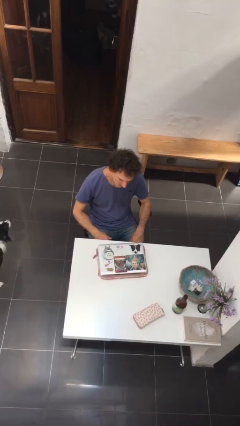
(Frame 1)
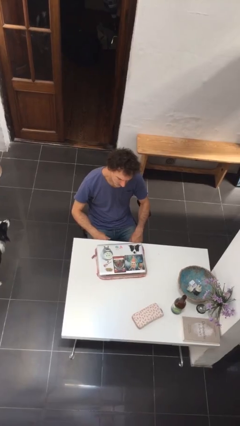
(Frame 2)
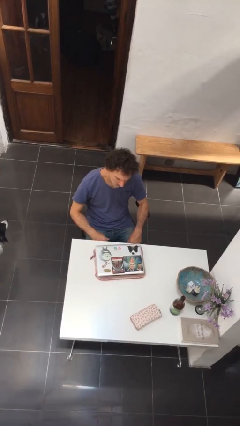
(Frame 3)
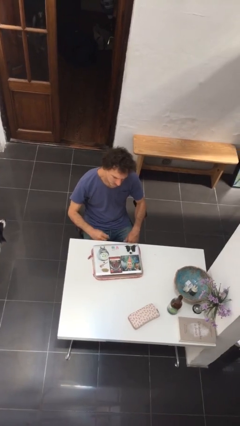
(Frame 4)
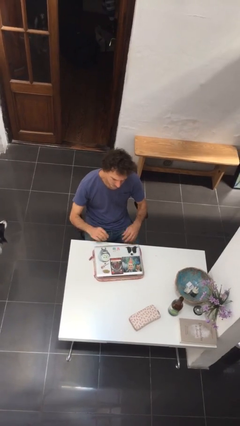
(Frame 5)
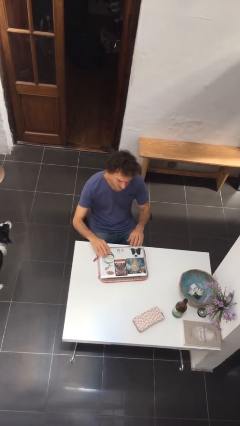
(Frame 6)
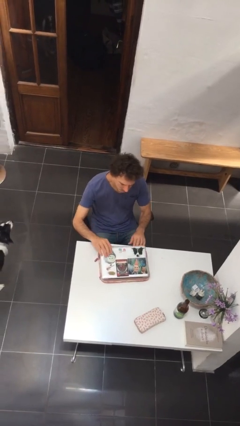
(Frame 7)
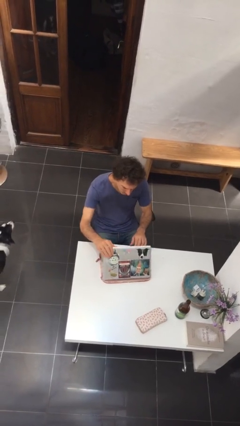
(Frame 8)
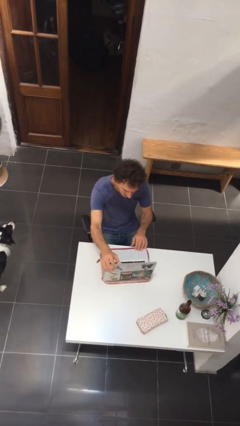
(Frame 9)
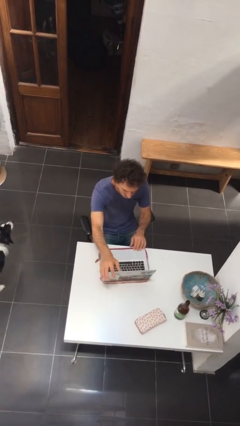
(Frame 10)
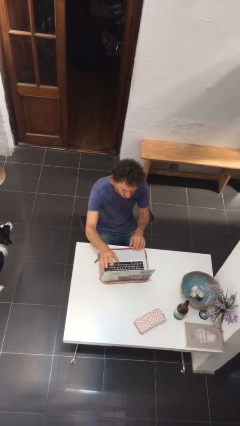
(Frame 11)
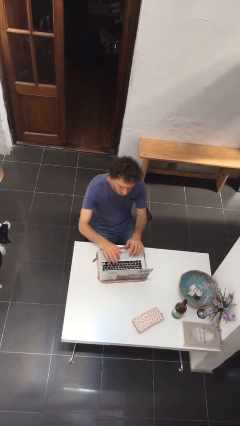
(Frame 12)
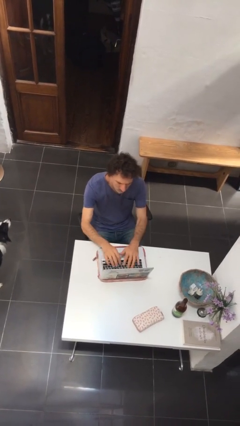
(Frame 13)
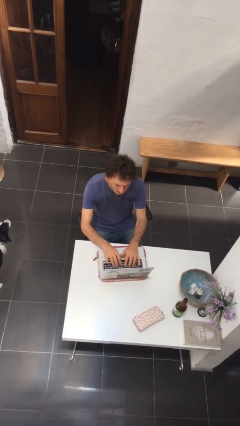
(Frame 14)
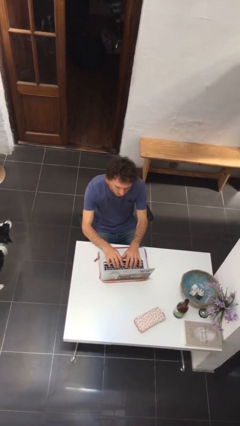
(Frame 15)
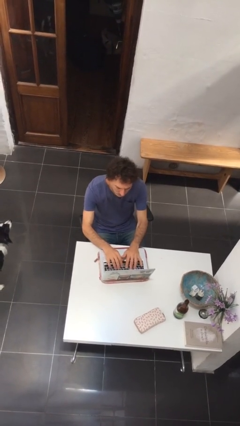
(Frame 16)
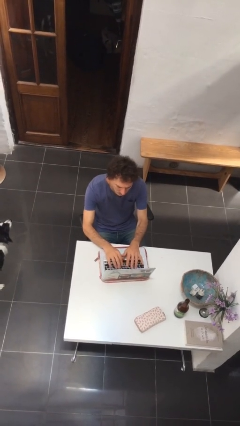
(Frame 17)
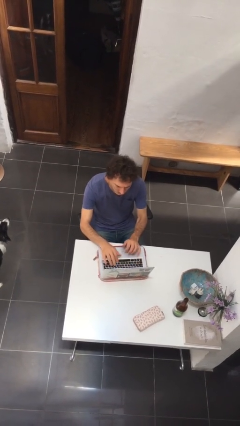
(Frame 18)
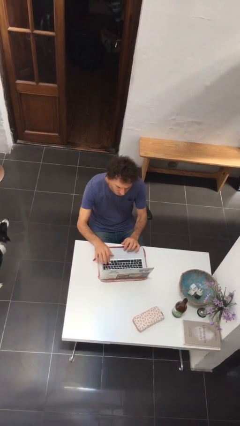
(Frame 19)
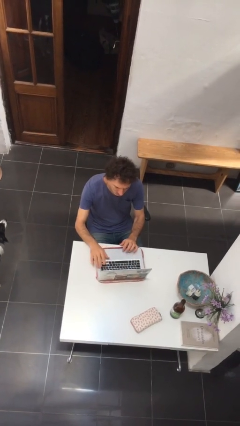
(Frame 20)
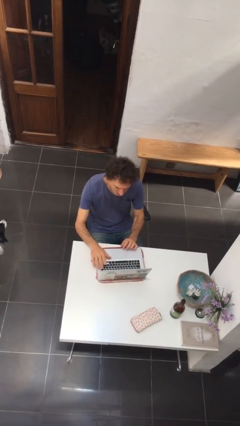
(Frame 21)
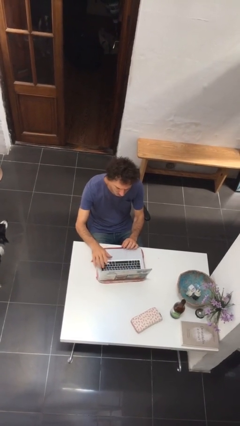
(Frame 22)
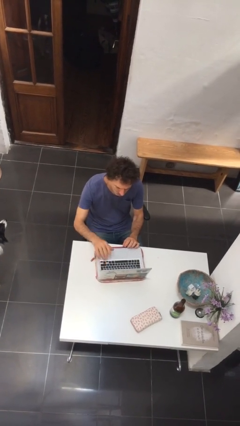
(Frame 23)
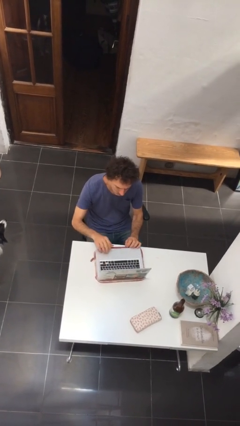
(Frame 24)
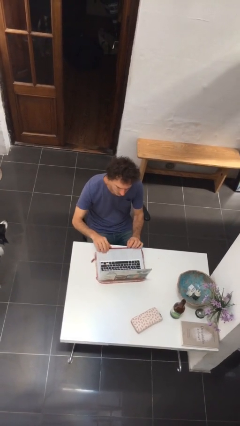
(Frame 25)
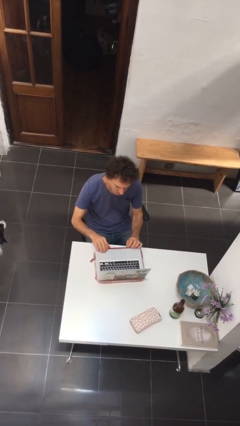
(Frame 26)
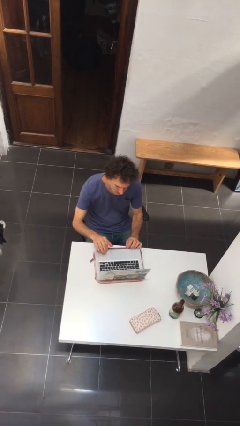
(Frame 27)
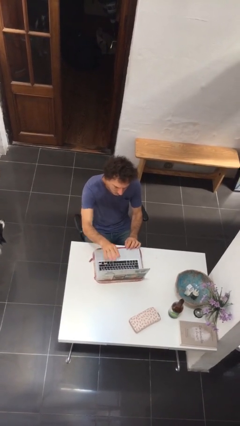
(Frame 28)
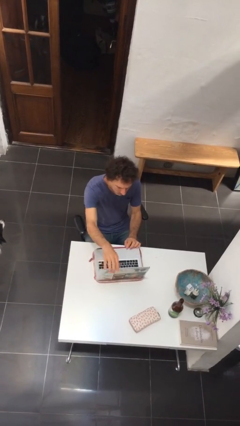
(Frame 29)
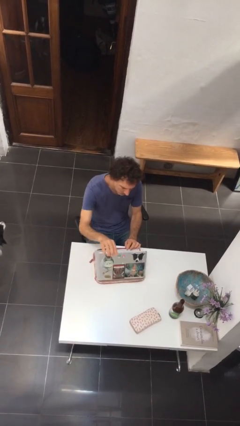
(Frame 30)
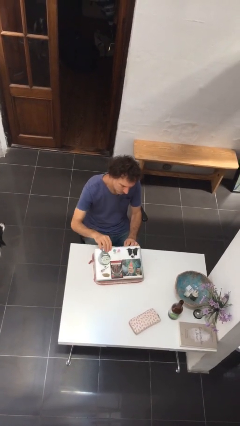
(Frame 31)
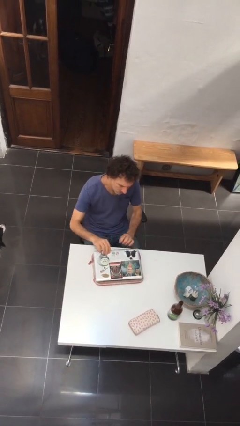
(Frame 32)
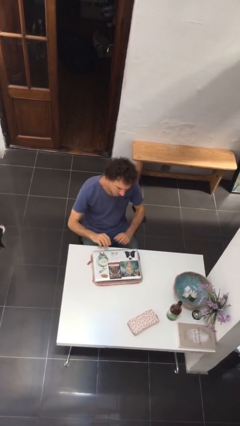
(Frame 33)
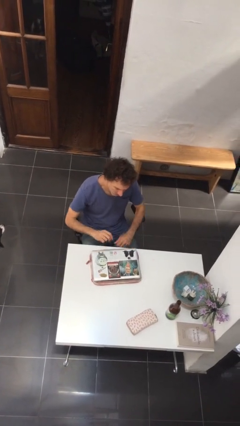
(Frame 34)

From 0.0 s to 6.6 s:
person interacts with laptop

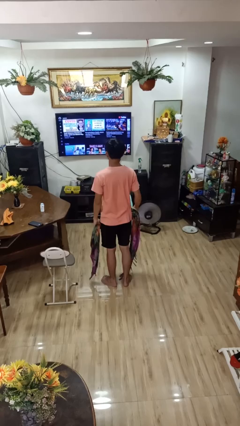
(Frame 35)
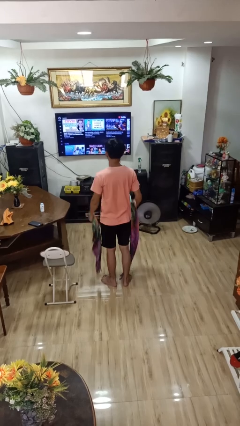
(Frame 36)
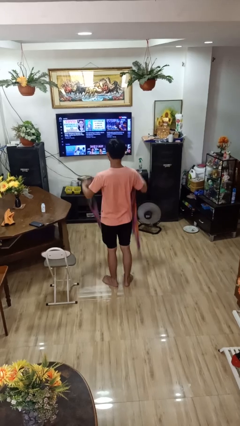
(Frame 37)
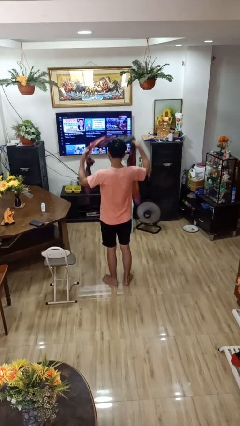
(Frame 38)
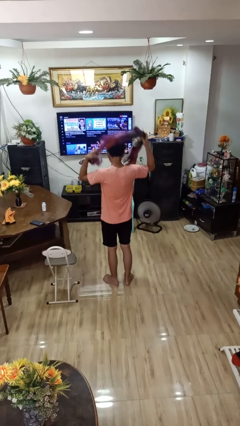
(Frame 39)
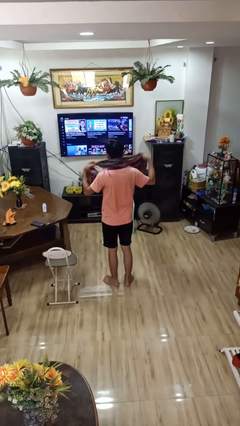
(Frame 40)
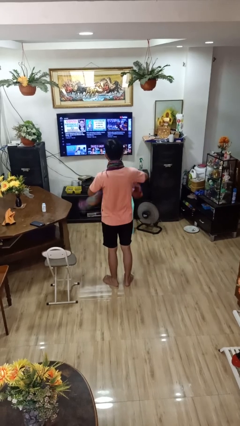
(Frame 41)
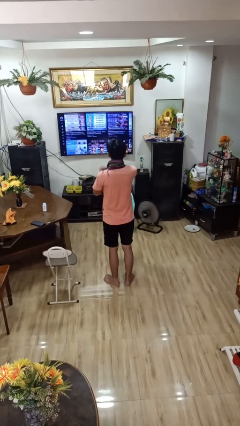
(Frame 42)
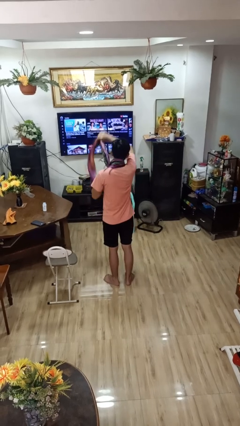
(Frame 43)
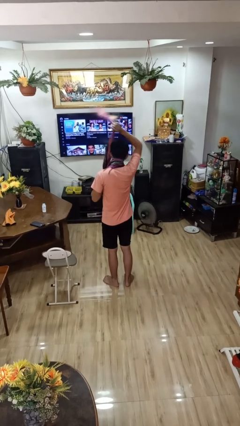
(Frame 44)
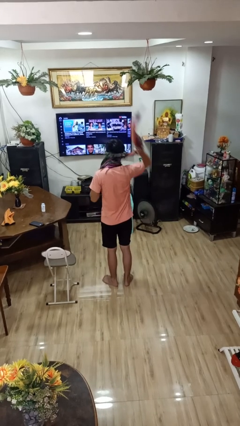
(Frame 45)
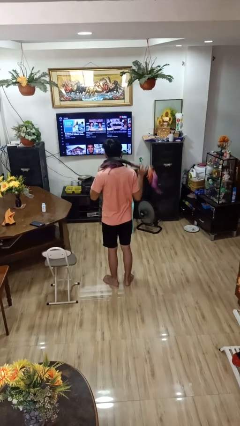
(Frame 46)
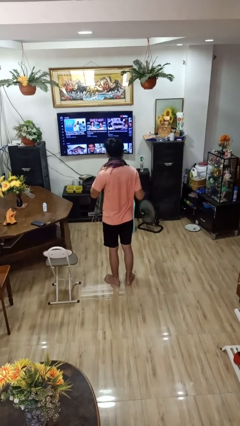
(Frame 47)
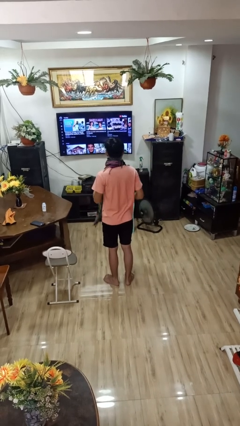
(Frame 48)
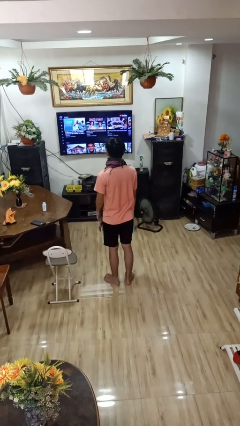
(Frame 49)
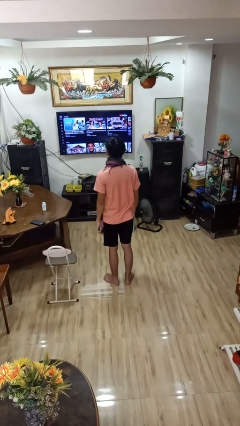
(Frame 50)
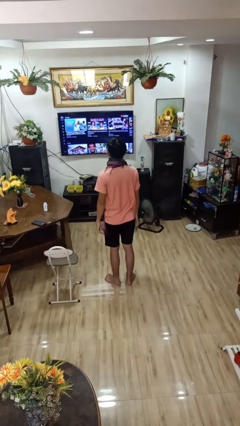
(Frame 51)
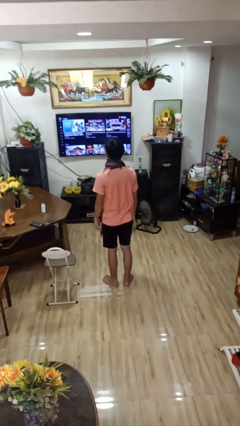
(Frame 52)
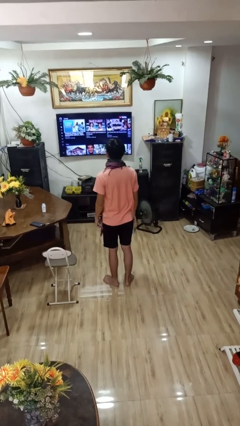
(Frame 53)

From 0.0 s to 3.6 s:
person puts on scarf

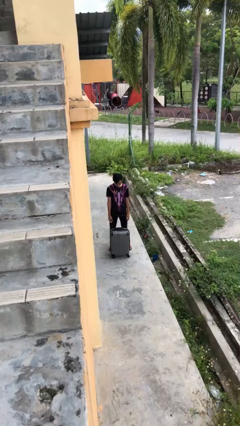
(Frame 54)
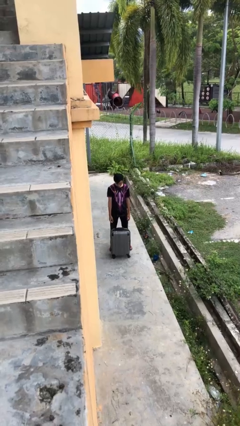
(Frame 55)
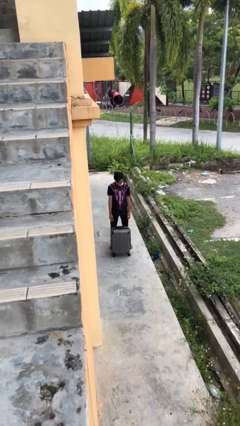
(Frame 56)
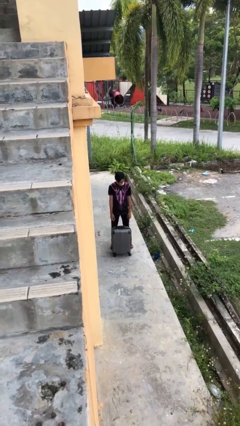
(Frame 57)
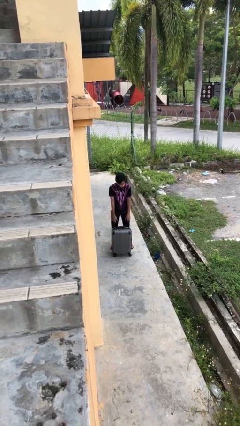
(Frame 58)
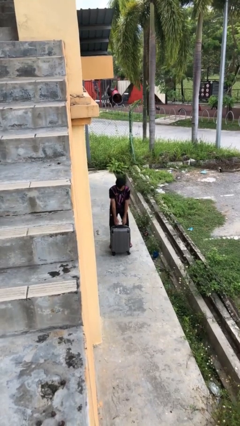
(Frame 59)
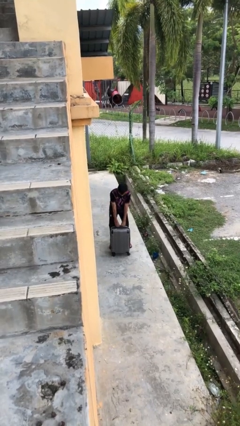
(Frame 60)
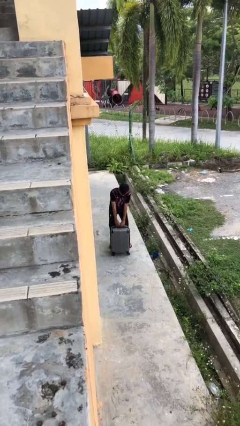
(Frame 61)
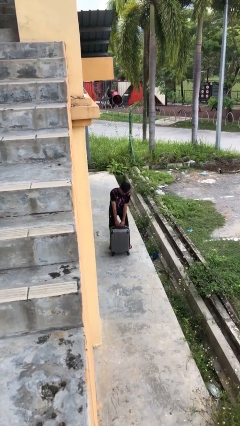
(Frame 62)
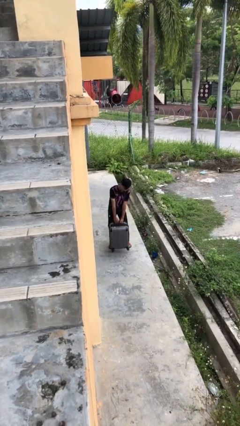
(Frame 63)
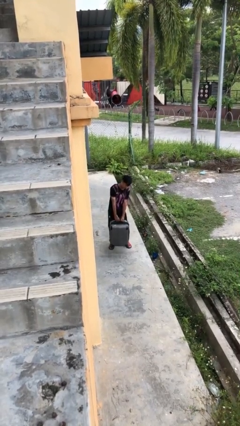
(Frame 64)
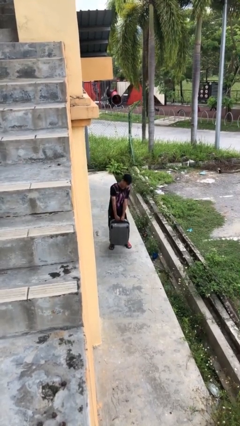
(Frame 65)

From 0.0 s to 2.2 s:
person picks up object from floor

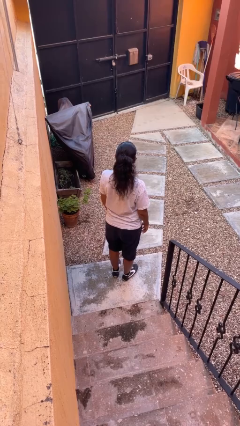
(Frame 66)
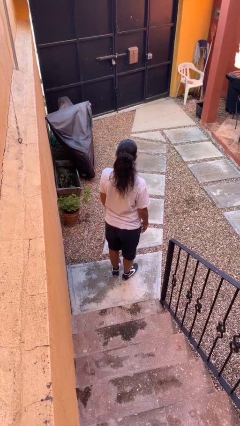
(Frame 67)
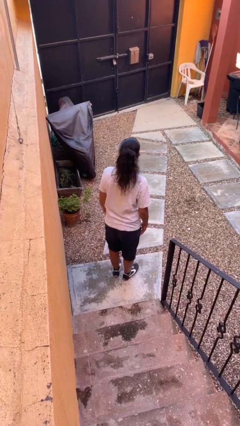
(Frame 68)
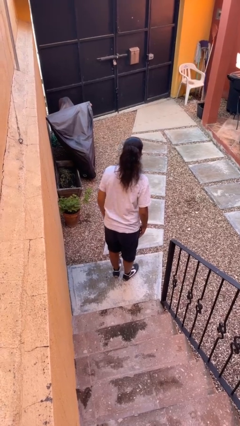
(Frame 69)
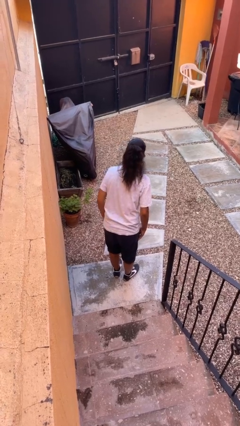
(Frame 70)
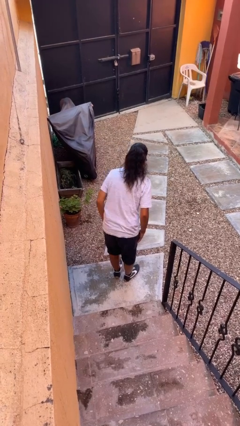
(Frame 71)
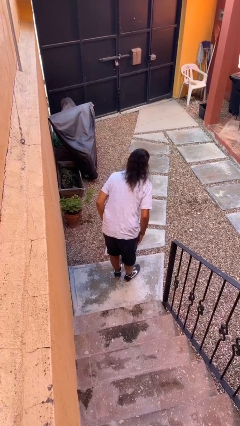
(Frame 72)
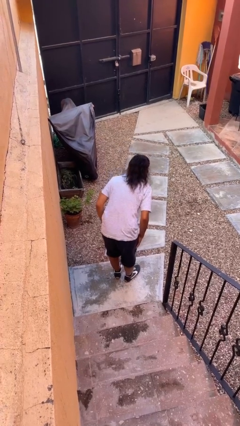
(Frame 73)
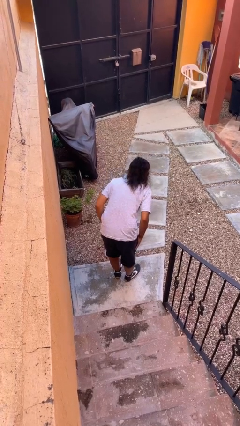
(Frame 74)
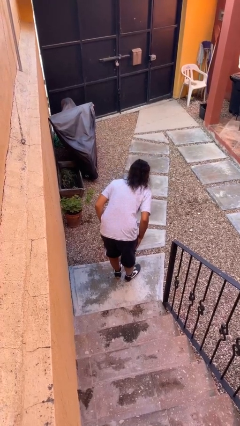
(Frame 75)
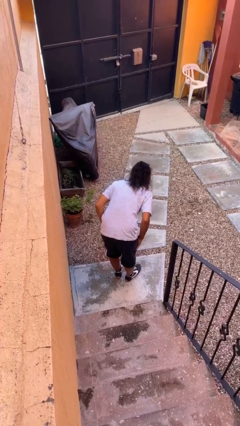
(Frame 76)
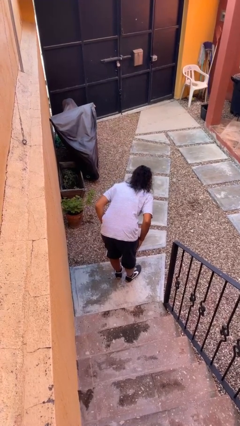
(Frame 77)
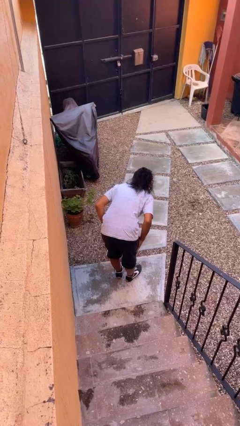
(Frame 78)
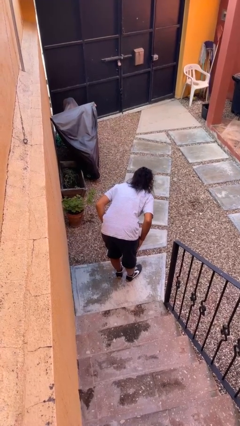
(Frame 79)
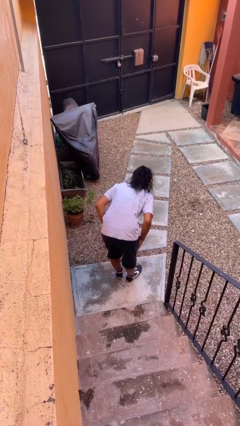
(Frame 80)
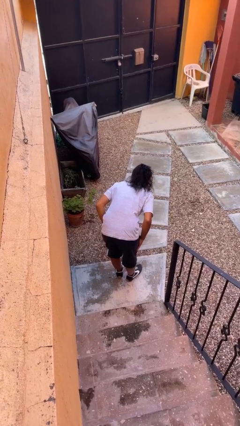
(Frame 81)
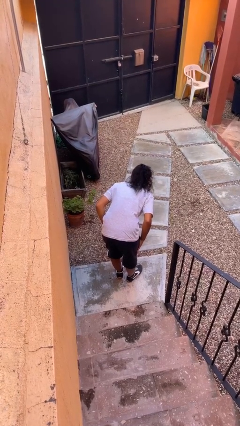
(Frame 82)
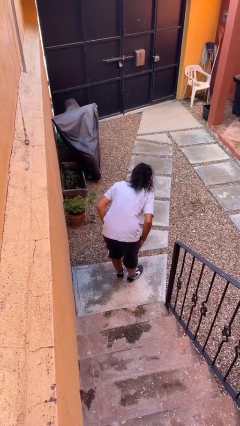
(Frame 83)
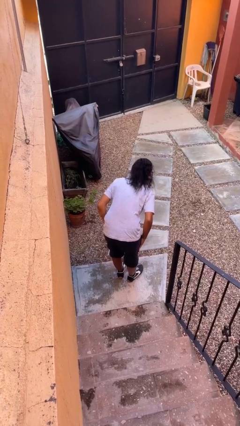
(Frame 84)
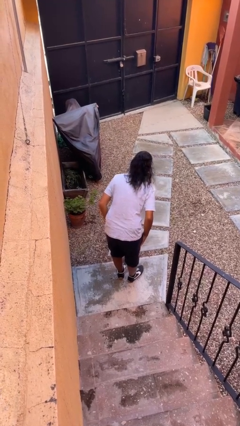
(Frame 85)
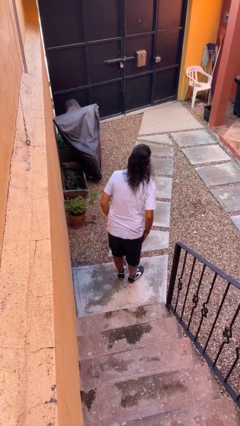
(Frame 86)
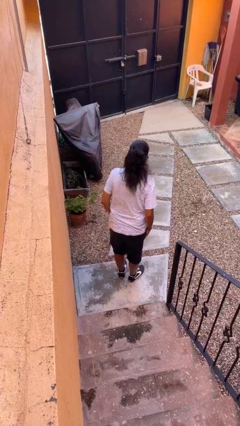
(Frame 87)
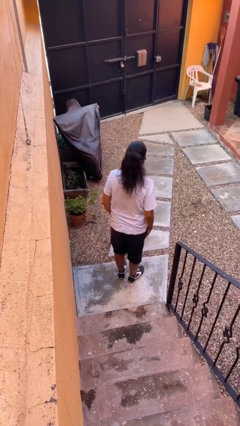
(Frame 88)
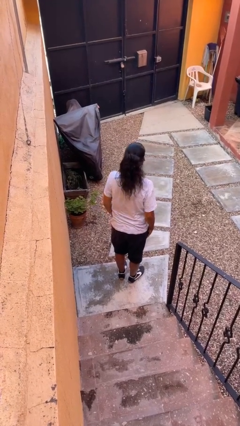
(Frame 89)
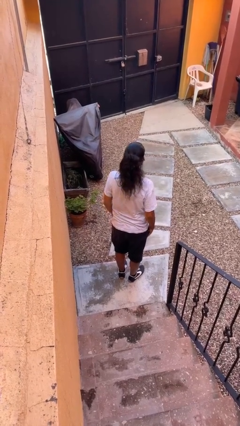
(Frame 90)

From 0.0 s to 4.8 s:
person bows

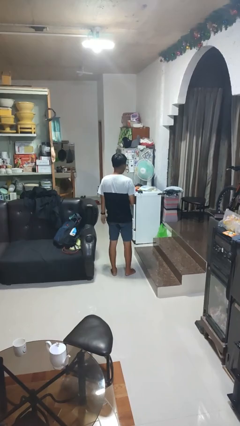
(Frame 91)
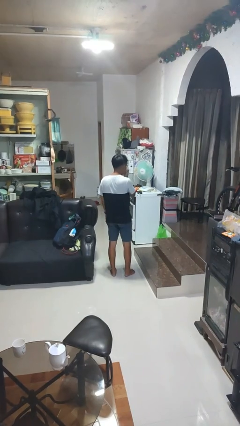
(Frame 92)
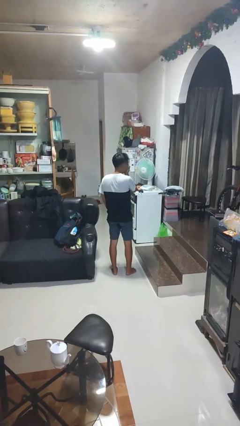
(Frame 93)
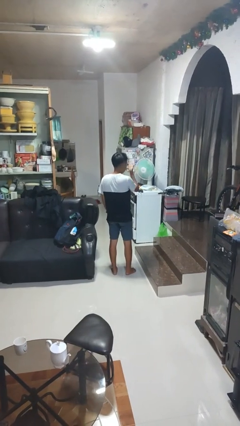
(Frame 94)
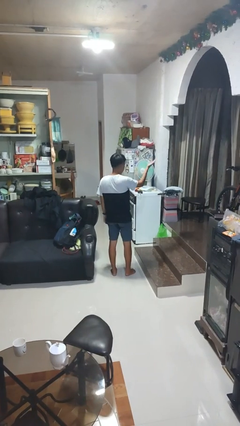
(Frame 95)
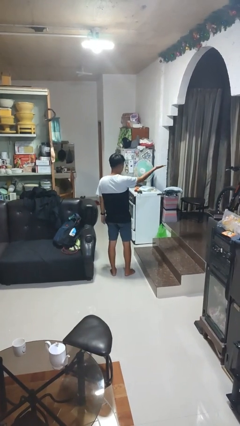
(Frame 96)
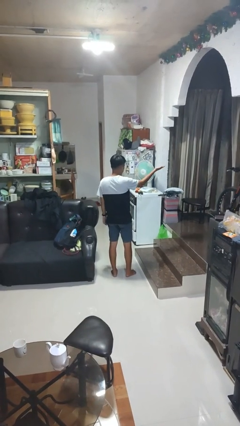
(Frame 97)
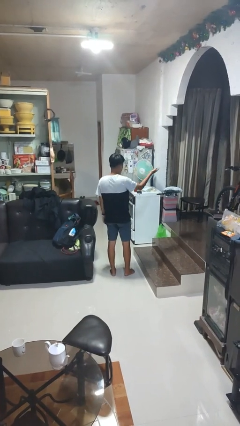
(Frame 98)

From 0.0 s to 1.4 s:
person gestures blow kiss
